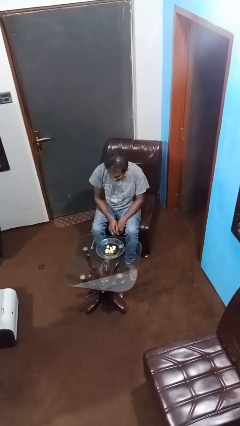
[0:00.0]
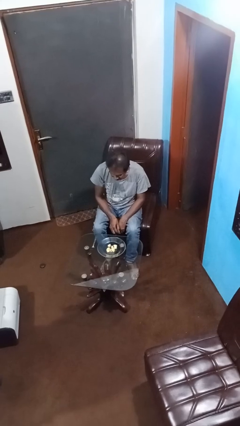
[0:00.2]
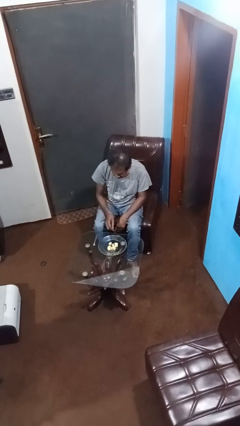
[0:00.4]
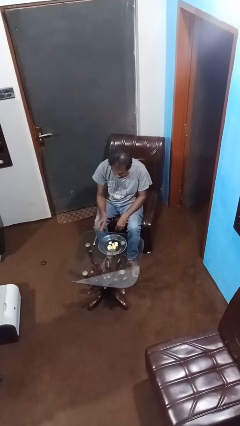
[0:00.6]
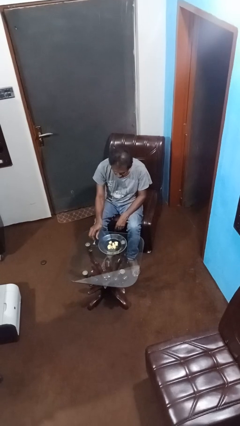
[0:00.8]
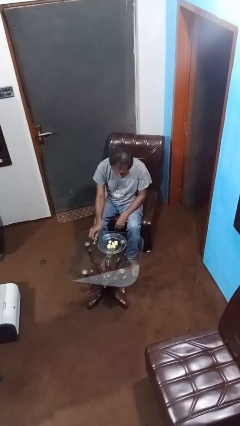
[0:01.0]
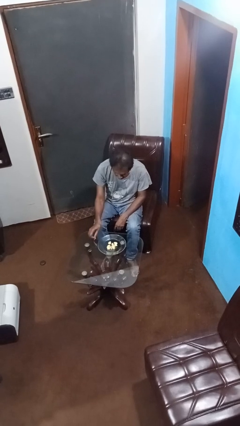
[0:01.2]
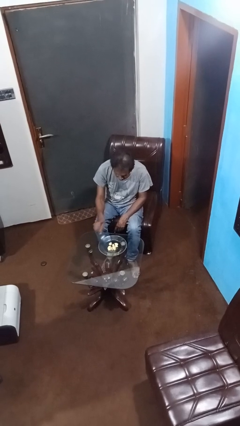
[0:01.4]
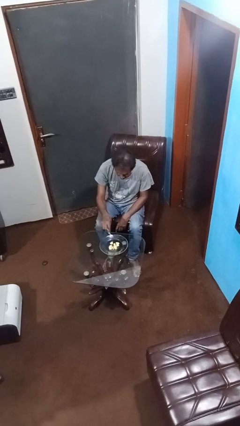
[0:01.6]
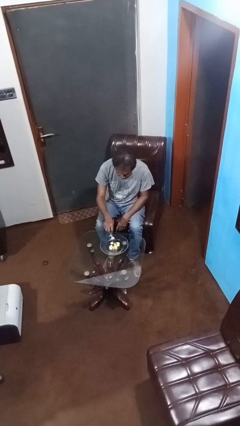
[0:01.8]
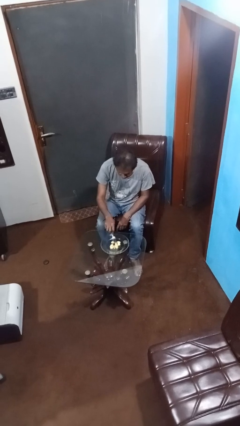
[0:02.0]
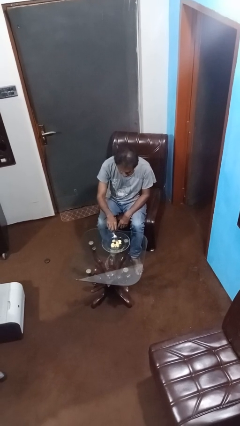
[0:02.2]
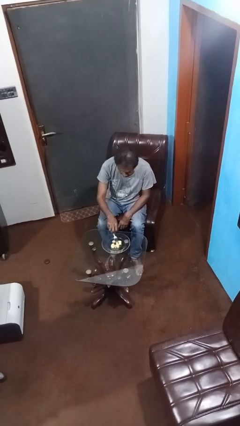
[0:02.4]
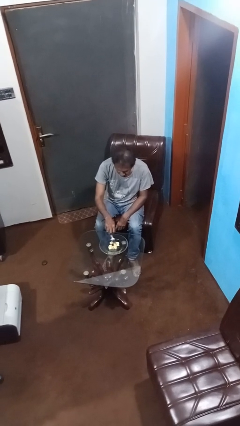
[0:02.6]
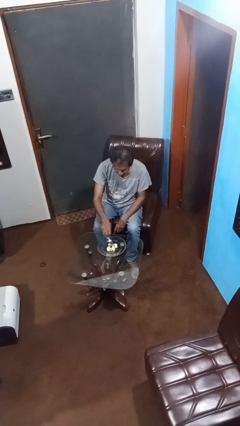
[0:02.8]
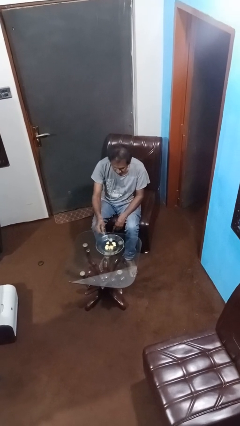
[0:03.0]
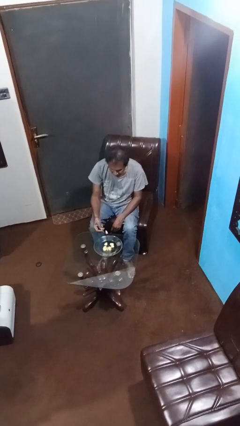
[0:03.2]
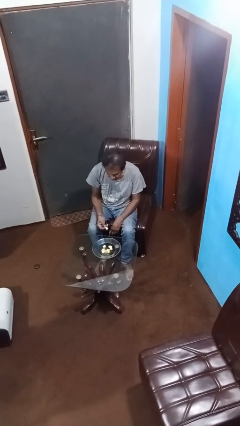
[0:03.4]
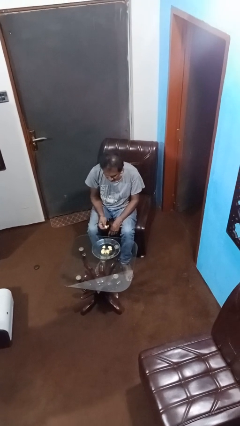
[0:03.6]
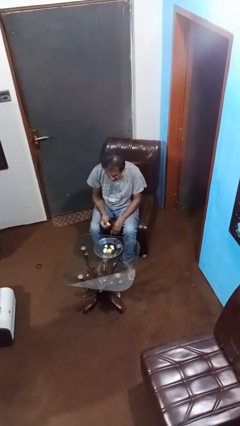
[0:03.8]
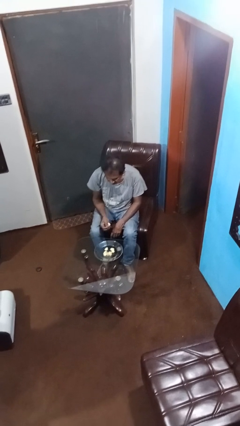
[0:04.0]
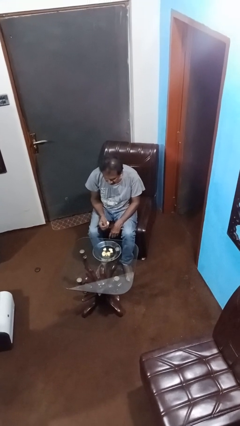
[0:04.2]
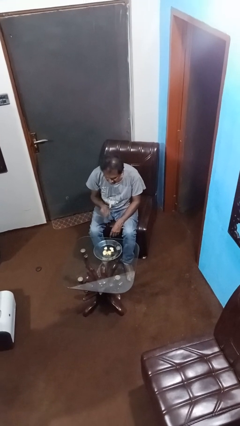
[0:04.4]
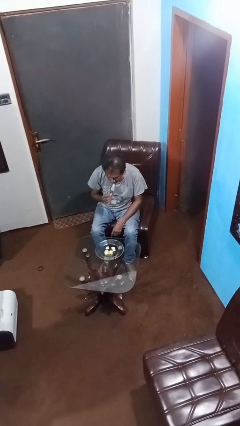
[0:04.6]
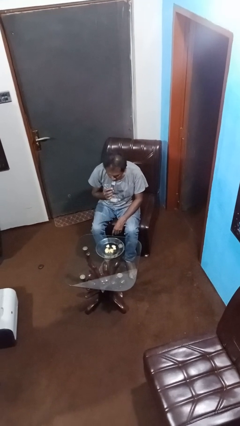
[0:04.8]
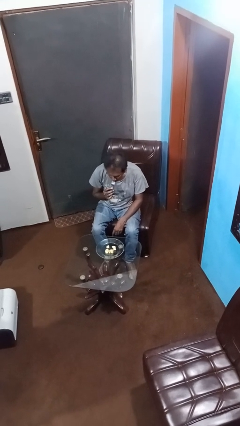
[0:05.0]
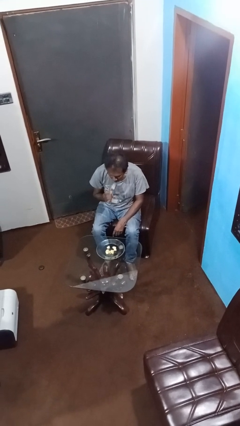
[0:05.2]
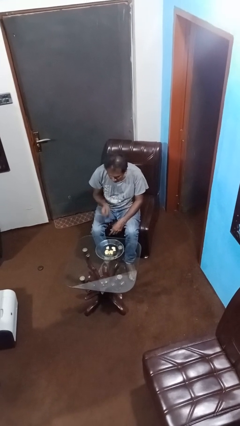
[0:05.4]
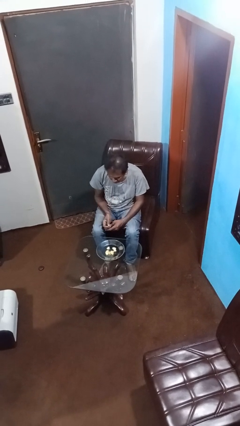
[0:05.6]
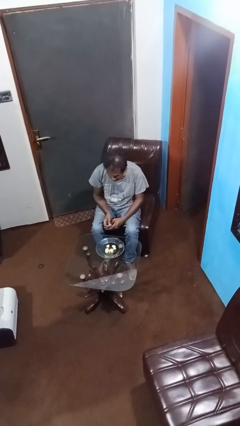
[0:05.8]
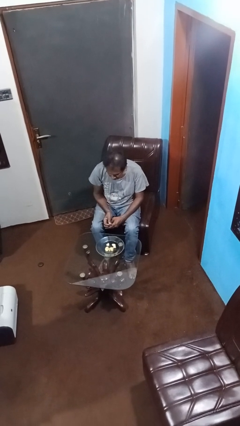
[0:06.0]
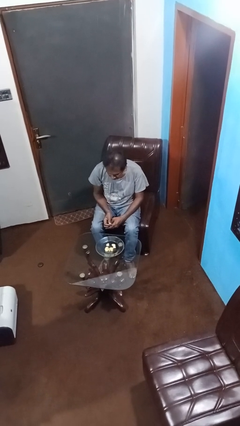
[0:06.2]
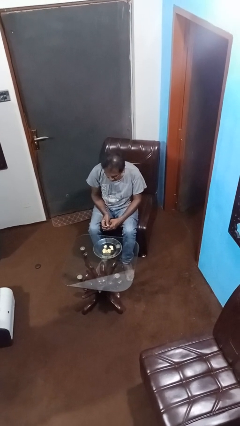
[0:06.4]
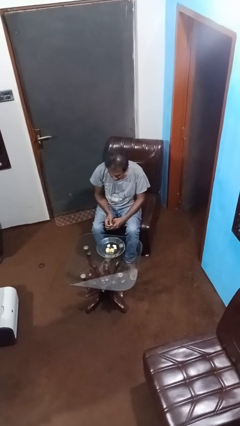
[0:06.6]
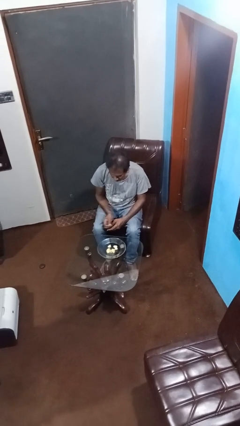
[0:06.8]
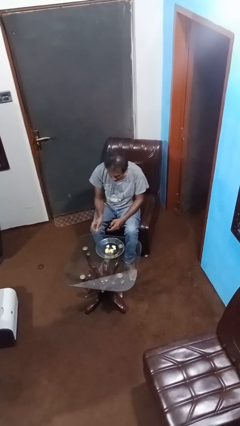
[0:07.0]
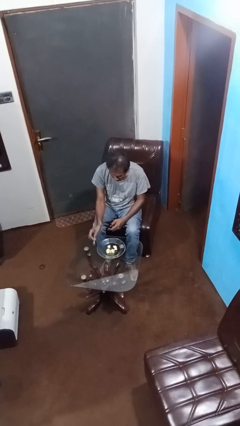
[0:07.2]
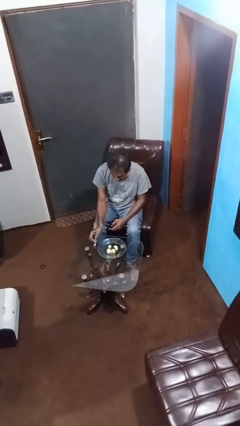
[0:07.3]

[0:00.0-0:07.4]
person eats with utensil

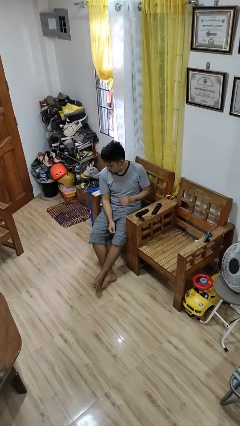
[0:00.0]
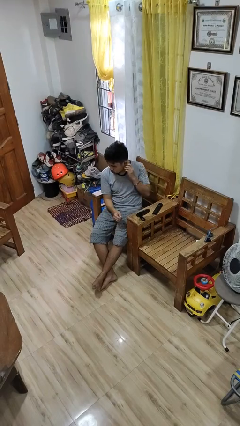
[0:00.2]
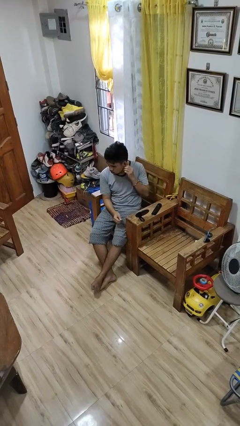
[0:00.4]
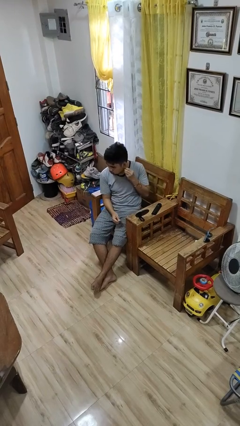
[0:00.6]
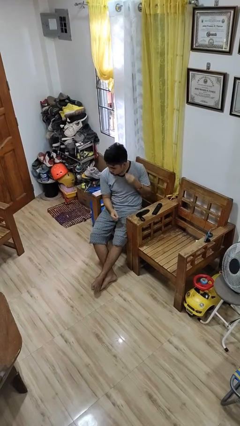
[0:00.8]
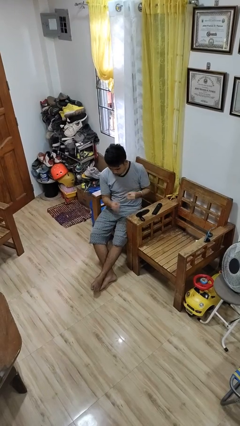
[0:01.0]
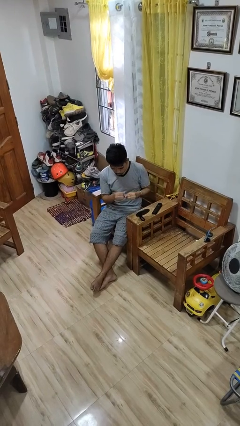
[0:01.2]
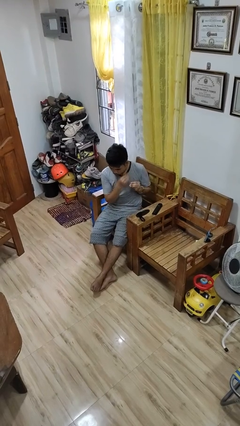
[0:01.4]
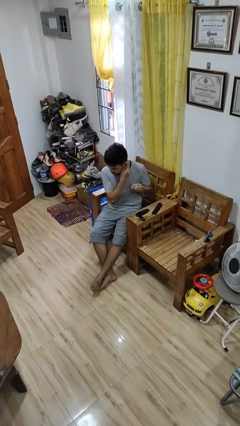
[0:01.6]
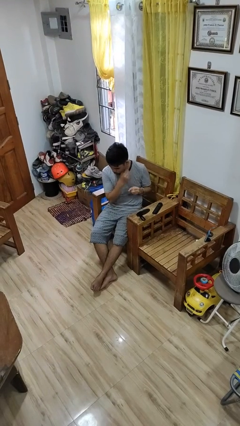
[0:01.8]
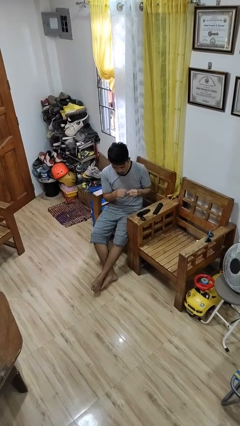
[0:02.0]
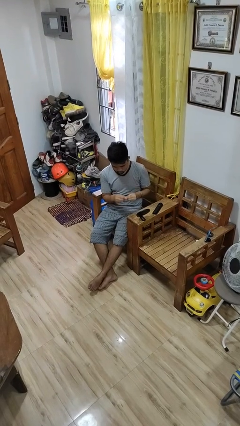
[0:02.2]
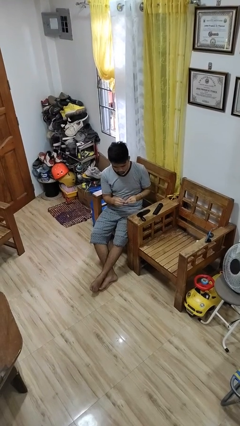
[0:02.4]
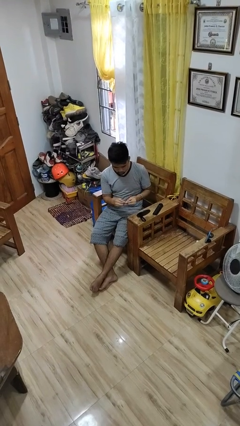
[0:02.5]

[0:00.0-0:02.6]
person takes off earrings

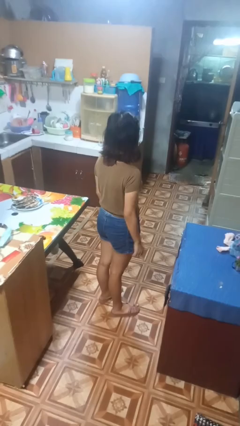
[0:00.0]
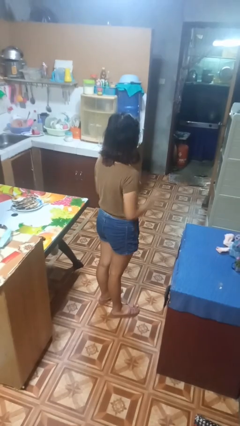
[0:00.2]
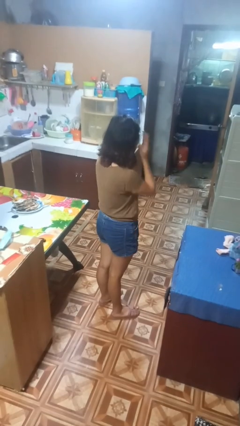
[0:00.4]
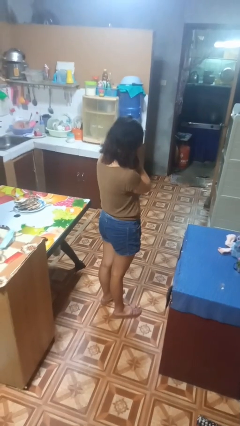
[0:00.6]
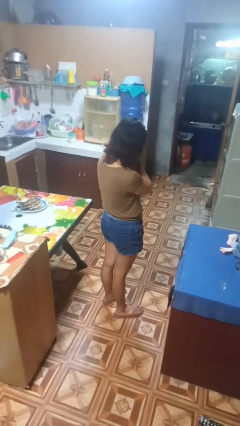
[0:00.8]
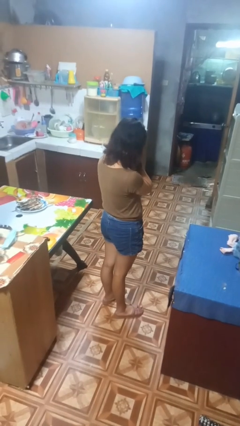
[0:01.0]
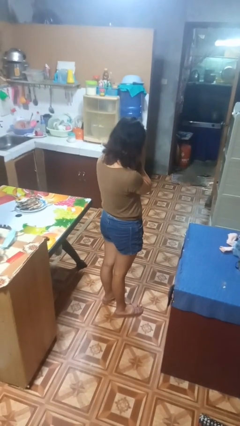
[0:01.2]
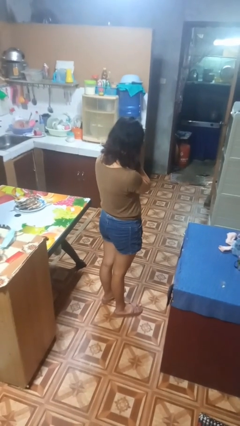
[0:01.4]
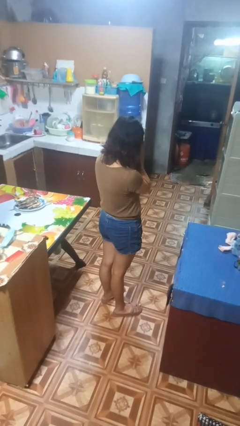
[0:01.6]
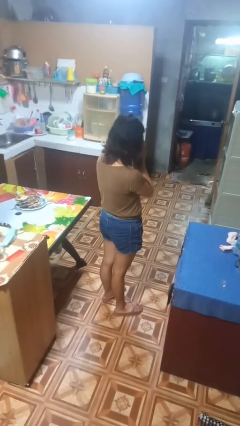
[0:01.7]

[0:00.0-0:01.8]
person covers face with hands

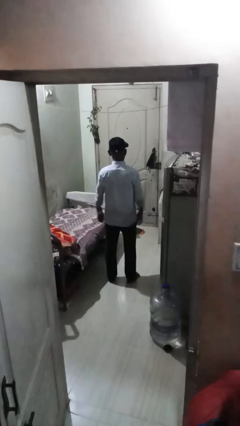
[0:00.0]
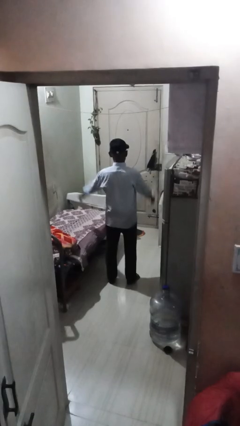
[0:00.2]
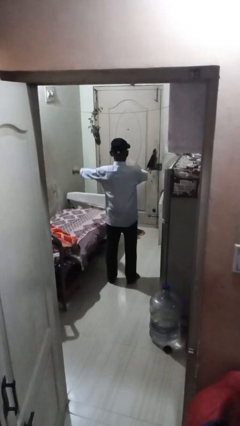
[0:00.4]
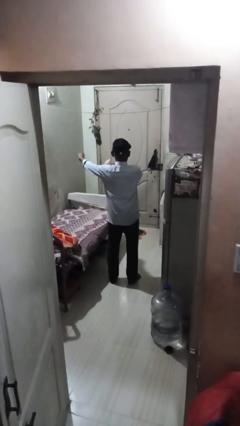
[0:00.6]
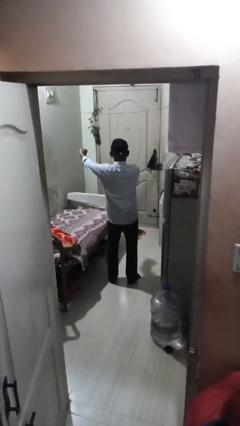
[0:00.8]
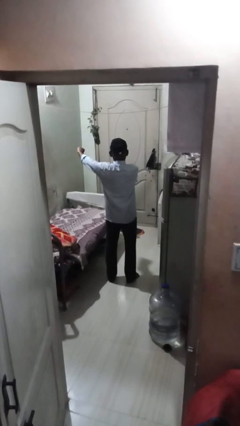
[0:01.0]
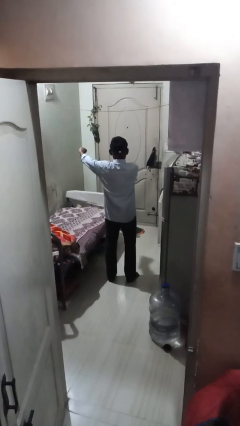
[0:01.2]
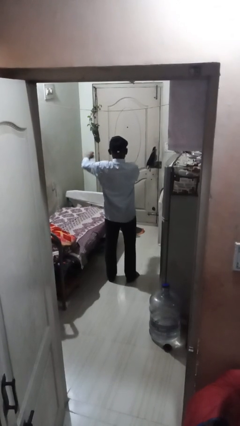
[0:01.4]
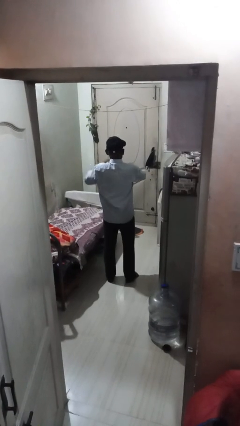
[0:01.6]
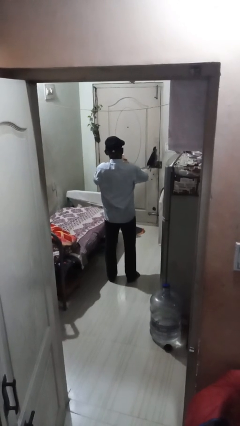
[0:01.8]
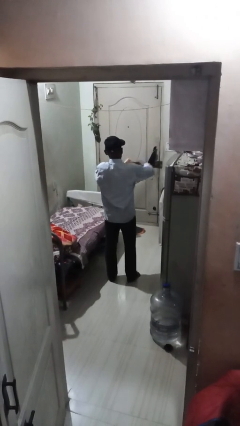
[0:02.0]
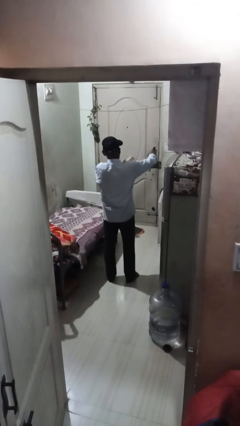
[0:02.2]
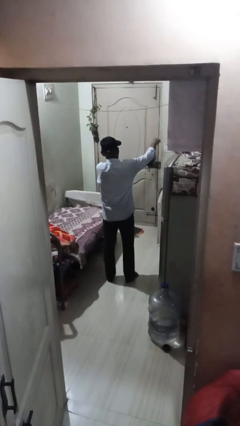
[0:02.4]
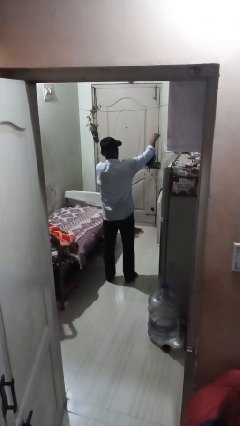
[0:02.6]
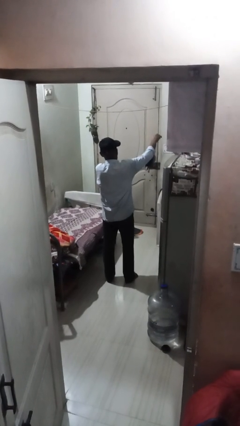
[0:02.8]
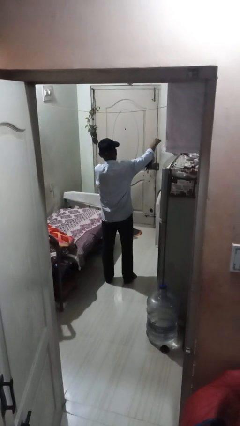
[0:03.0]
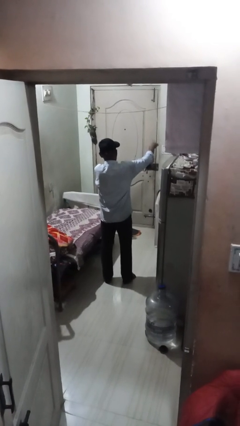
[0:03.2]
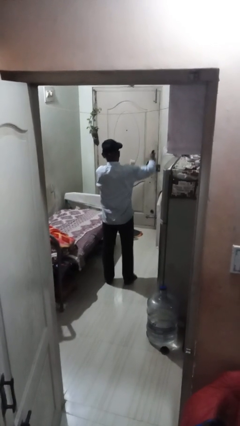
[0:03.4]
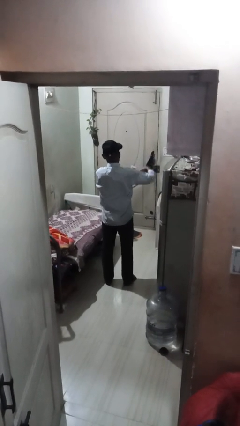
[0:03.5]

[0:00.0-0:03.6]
person applies deodorant

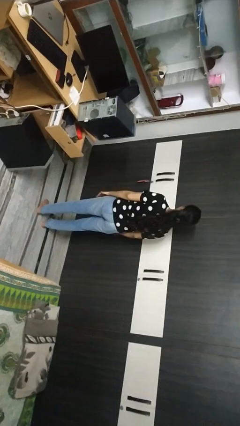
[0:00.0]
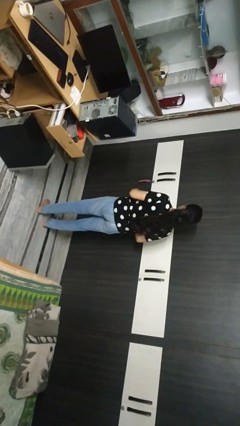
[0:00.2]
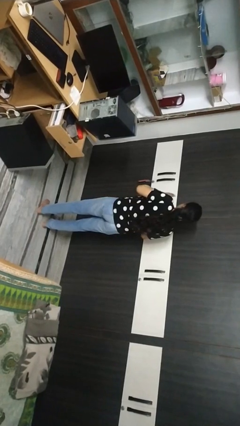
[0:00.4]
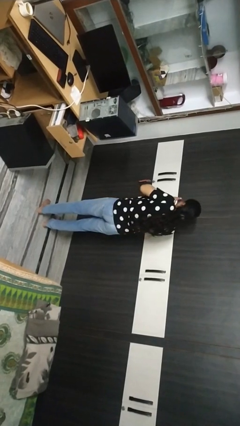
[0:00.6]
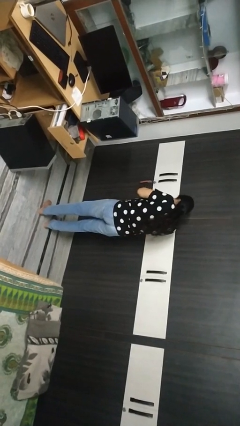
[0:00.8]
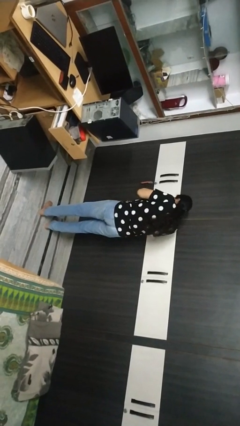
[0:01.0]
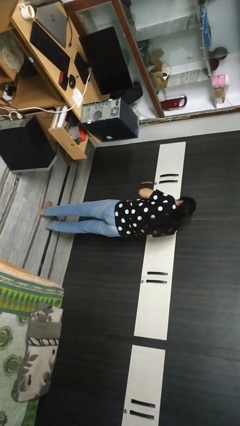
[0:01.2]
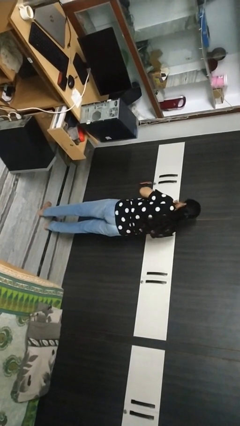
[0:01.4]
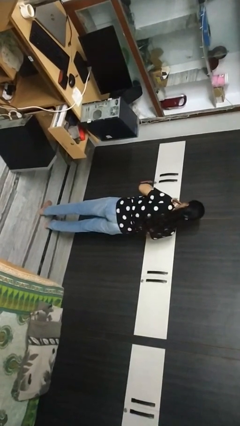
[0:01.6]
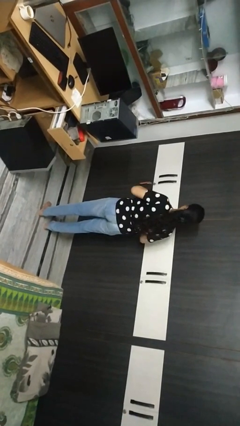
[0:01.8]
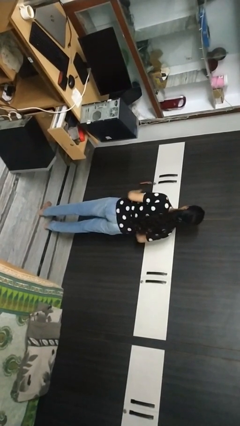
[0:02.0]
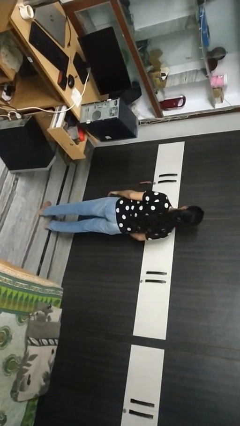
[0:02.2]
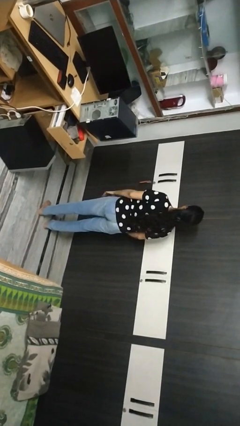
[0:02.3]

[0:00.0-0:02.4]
person sneezes into hand
